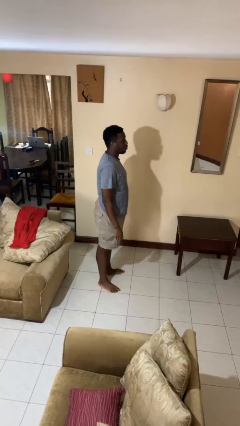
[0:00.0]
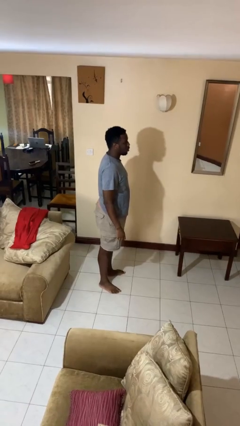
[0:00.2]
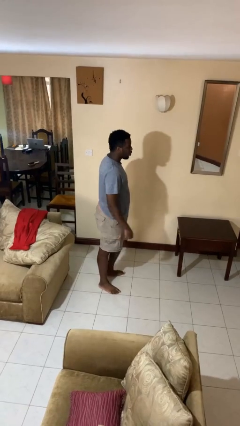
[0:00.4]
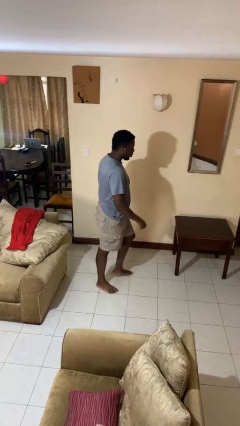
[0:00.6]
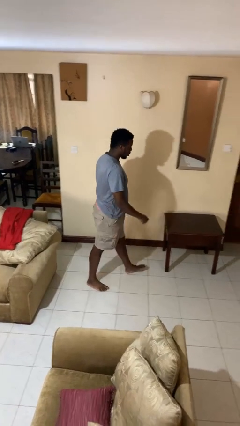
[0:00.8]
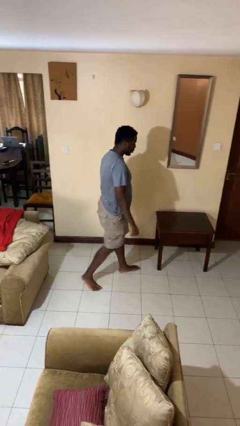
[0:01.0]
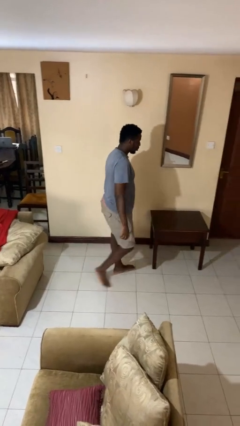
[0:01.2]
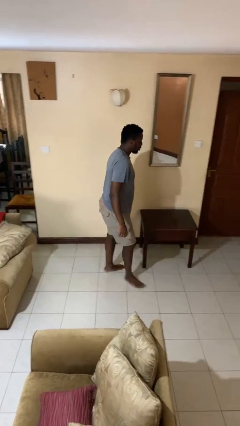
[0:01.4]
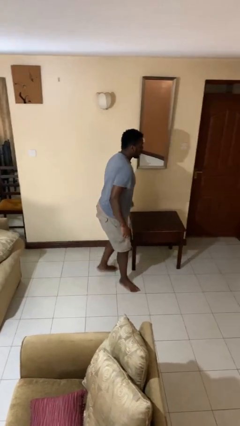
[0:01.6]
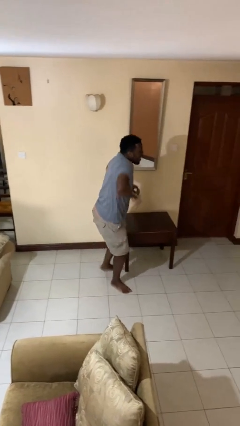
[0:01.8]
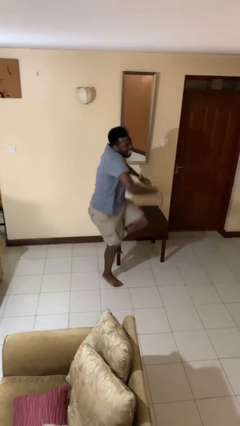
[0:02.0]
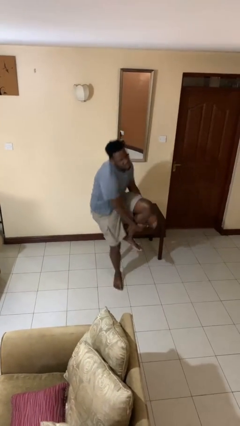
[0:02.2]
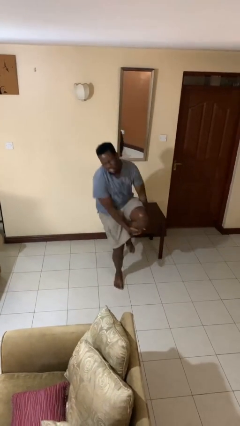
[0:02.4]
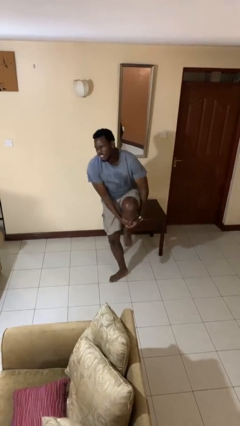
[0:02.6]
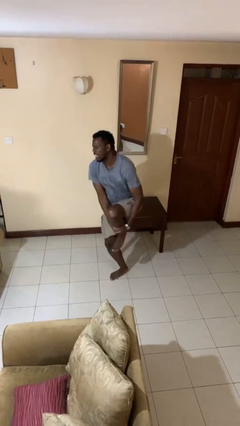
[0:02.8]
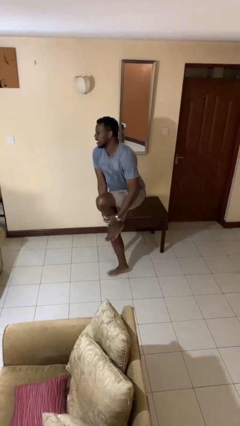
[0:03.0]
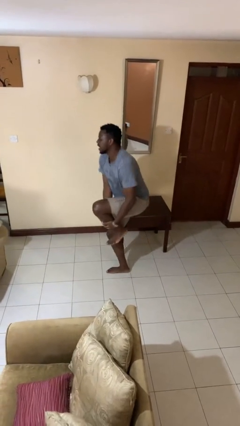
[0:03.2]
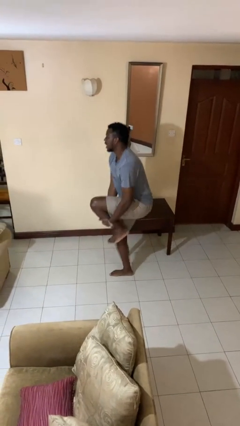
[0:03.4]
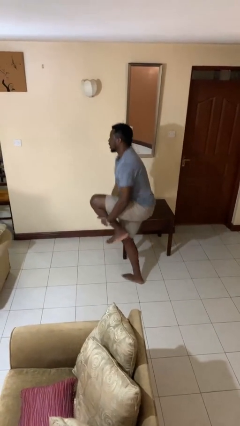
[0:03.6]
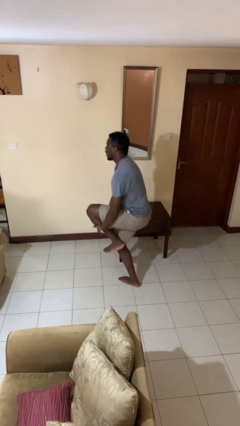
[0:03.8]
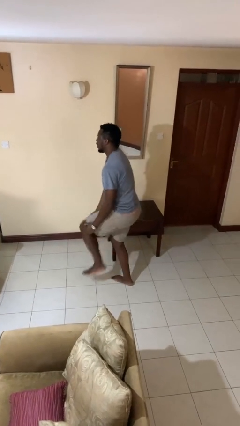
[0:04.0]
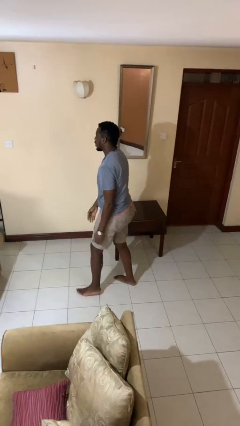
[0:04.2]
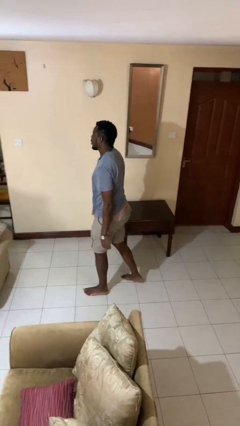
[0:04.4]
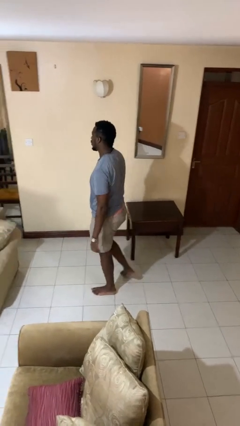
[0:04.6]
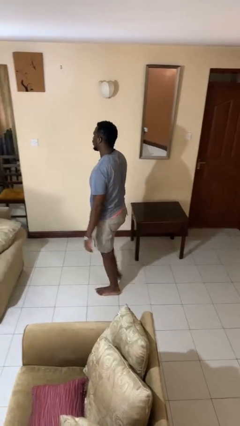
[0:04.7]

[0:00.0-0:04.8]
person stubs toe

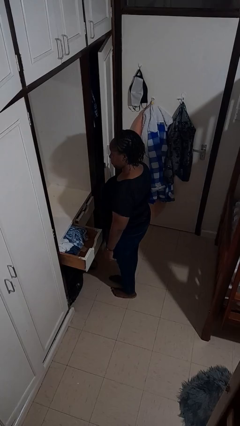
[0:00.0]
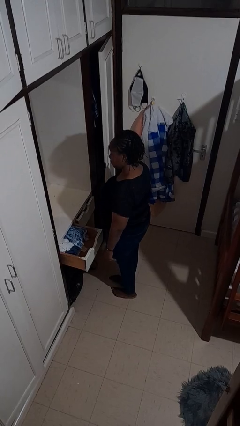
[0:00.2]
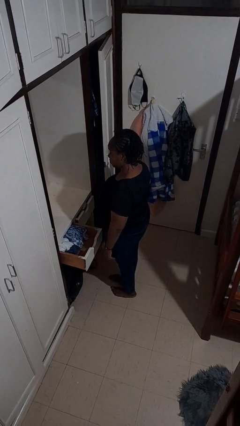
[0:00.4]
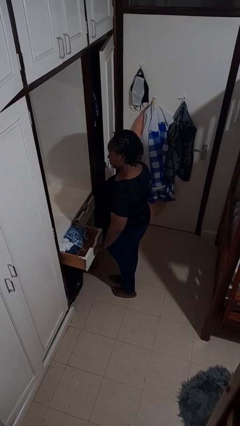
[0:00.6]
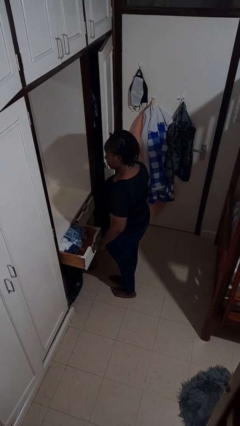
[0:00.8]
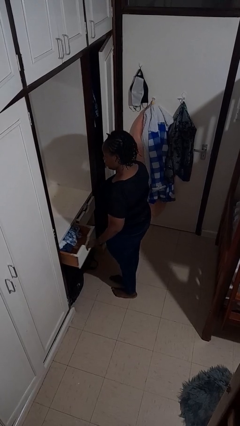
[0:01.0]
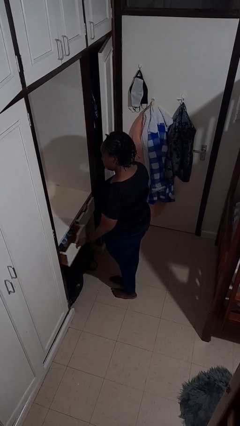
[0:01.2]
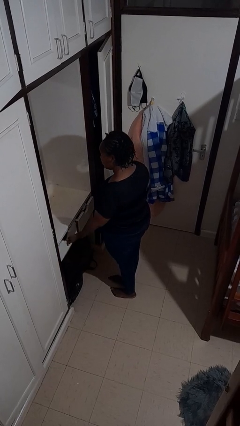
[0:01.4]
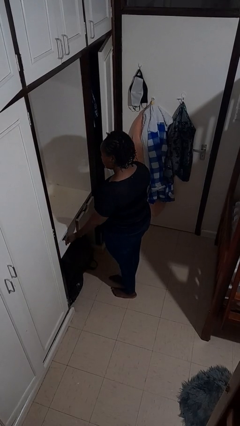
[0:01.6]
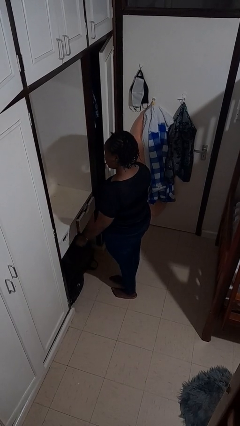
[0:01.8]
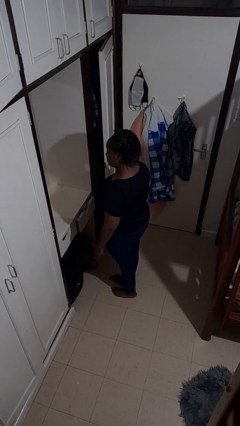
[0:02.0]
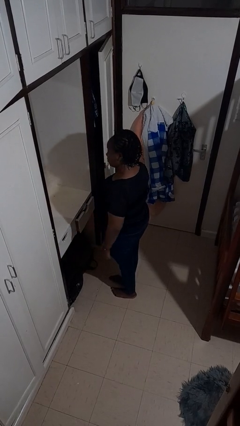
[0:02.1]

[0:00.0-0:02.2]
person closes dresser drawer

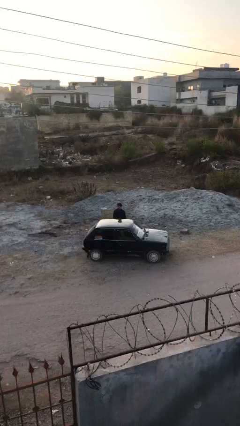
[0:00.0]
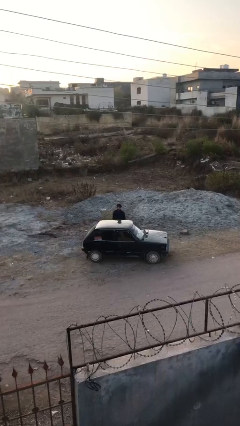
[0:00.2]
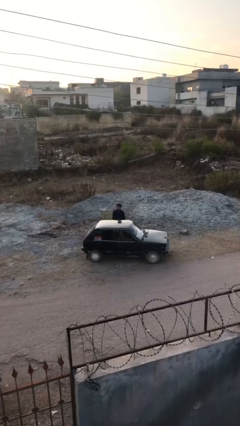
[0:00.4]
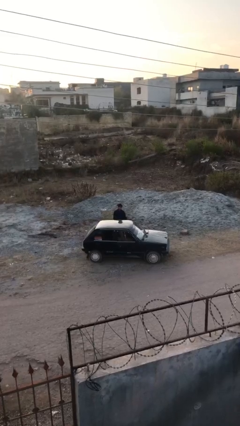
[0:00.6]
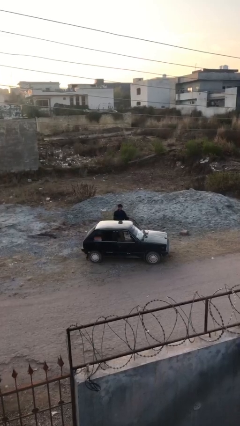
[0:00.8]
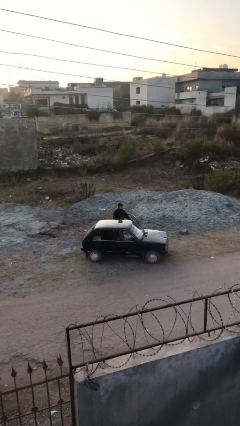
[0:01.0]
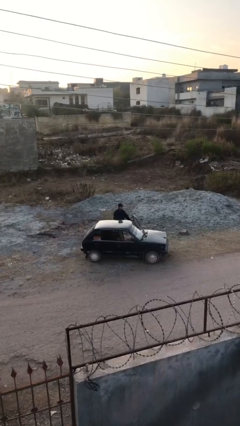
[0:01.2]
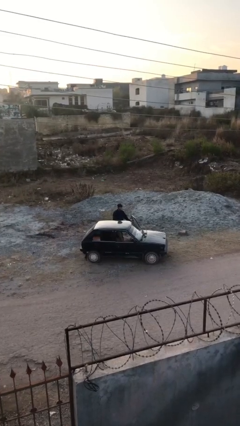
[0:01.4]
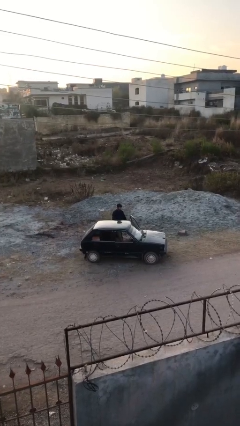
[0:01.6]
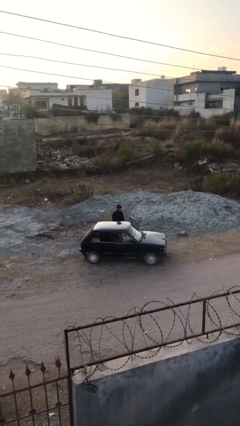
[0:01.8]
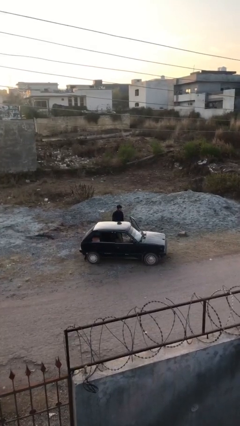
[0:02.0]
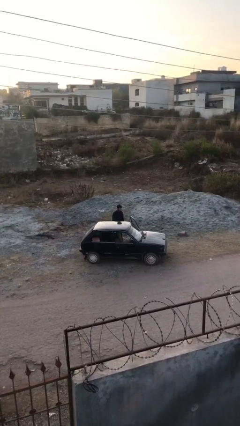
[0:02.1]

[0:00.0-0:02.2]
person opens car door

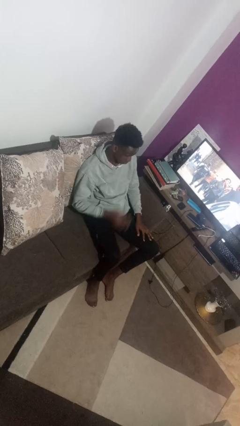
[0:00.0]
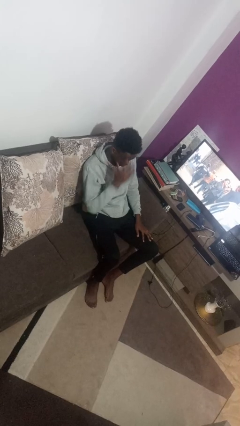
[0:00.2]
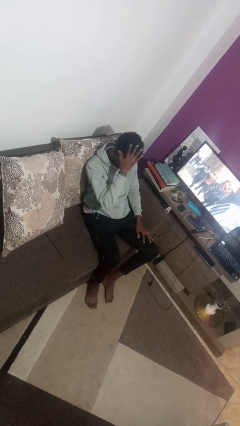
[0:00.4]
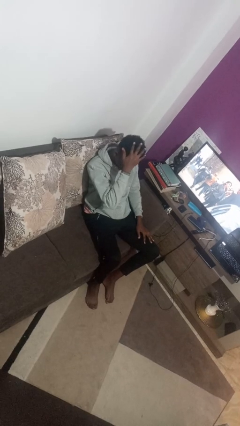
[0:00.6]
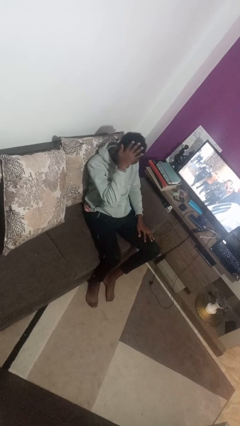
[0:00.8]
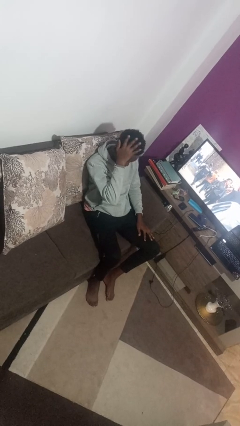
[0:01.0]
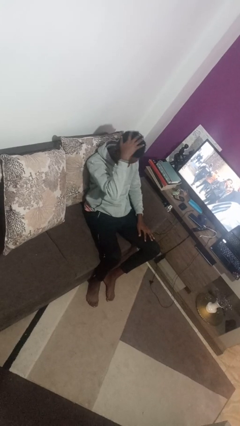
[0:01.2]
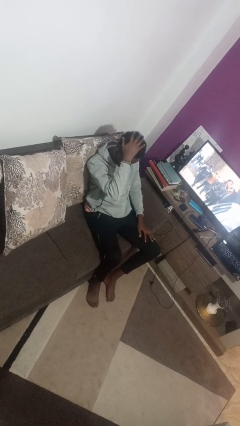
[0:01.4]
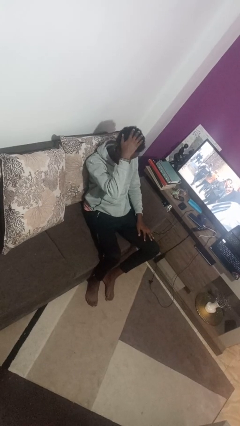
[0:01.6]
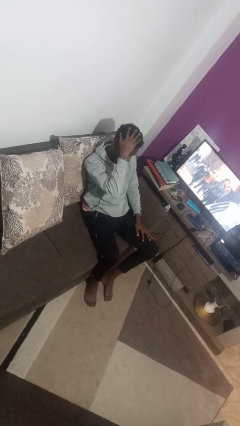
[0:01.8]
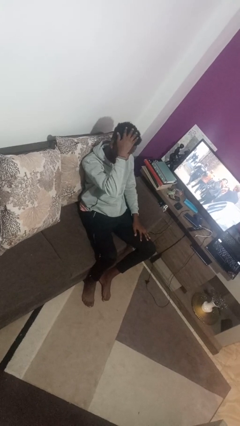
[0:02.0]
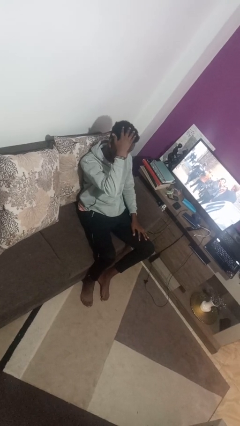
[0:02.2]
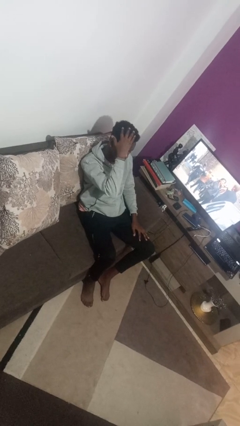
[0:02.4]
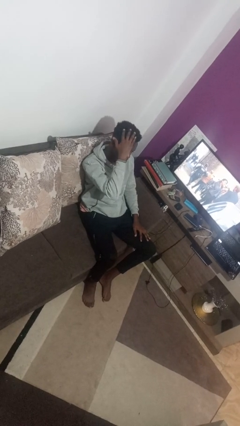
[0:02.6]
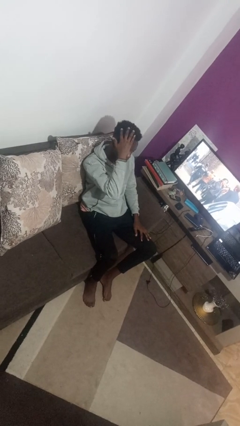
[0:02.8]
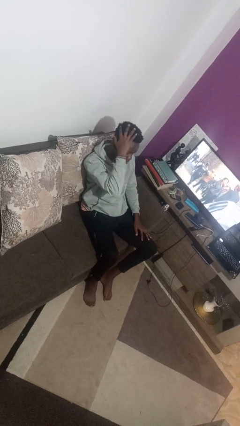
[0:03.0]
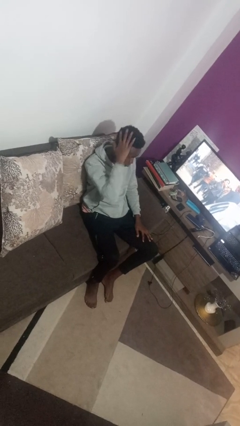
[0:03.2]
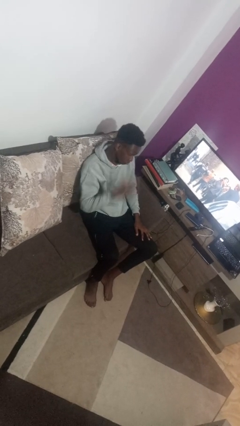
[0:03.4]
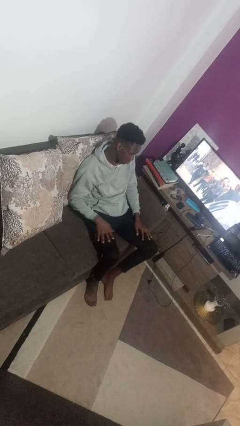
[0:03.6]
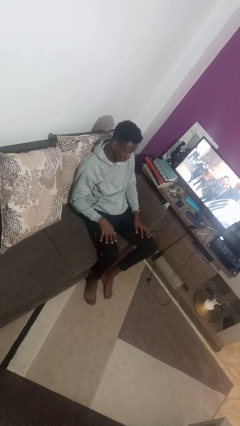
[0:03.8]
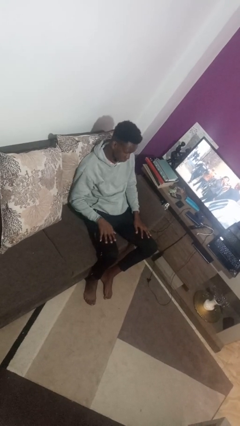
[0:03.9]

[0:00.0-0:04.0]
person strokes hair

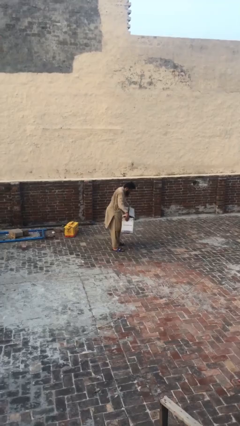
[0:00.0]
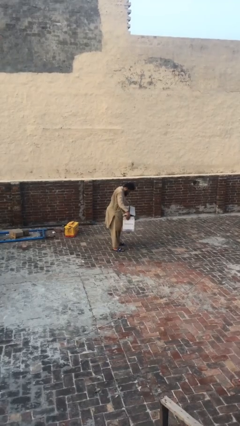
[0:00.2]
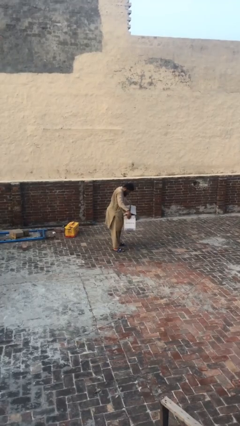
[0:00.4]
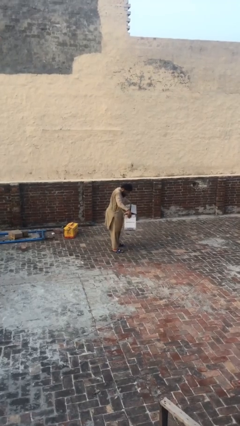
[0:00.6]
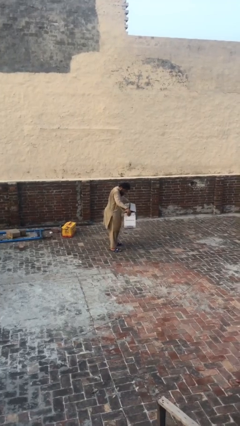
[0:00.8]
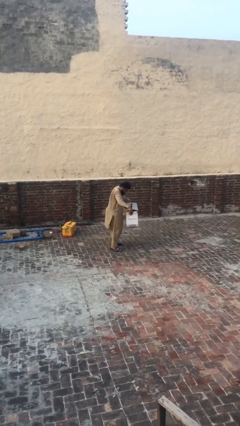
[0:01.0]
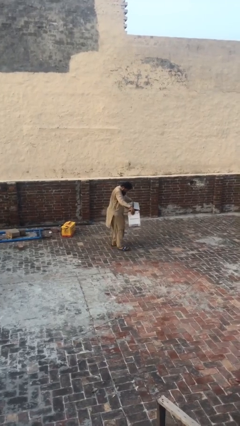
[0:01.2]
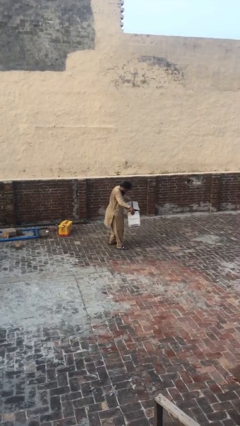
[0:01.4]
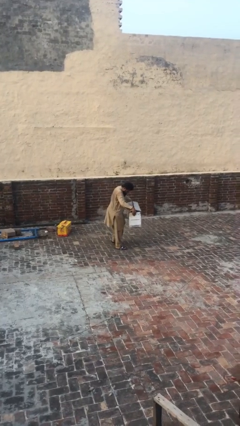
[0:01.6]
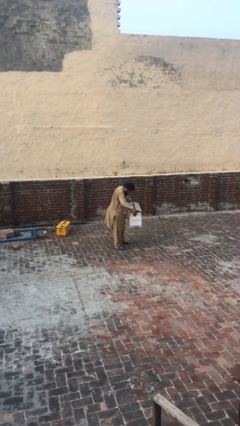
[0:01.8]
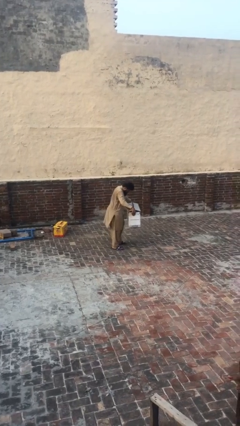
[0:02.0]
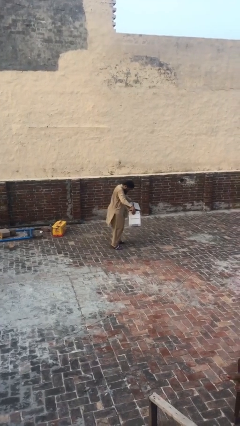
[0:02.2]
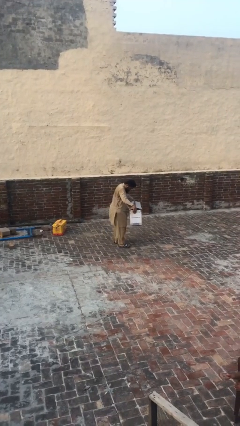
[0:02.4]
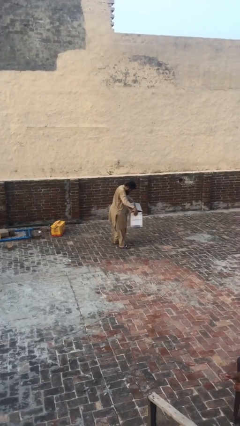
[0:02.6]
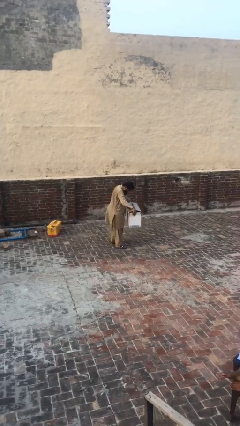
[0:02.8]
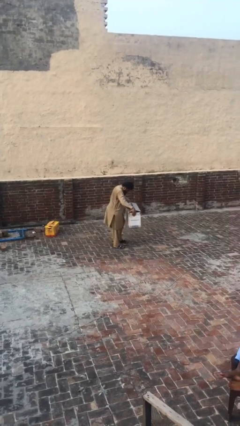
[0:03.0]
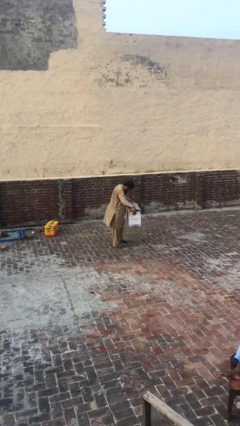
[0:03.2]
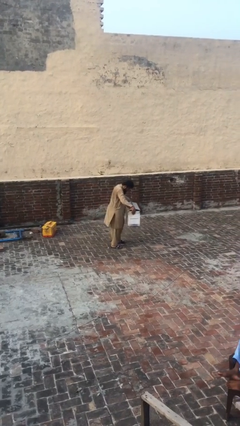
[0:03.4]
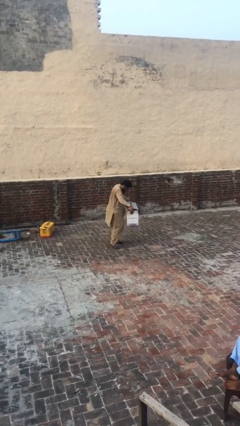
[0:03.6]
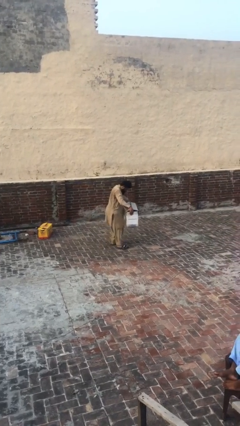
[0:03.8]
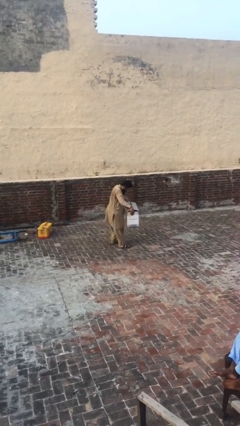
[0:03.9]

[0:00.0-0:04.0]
person carries heavy object
